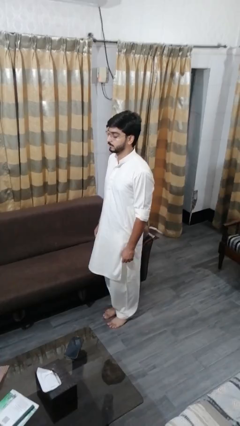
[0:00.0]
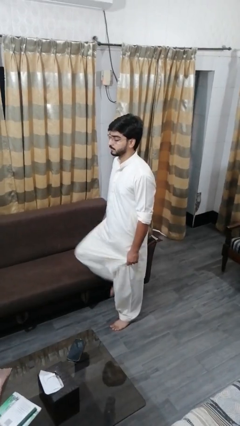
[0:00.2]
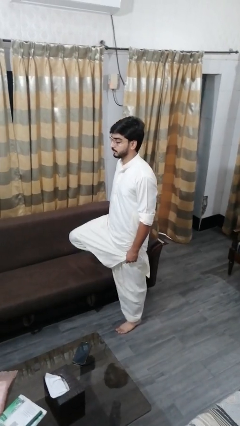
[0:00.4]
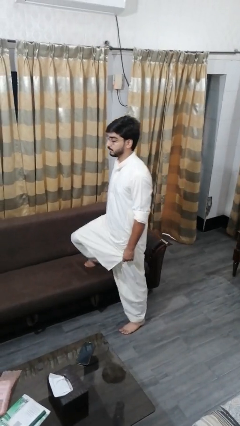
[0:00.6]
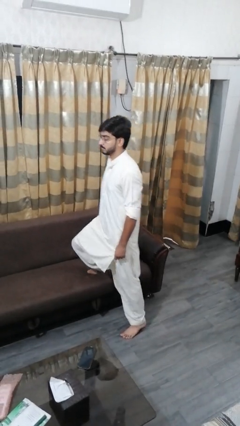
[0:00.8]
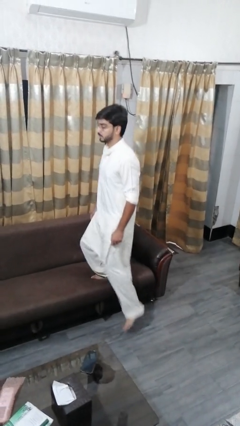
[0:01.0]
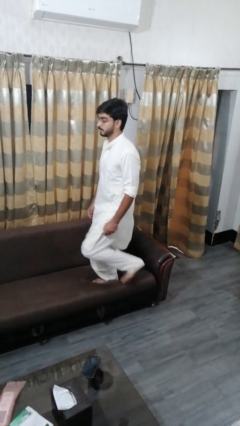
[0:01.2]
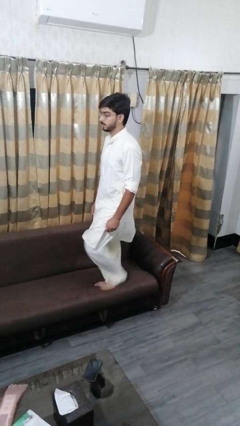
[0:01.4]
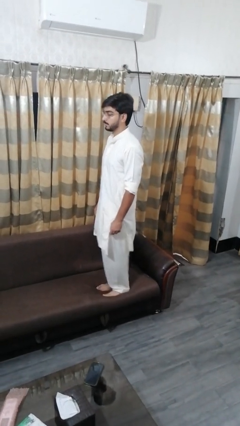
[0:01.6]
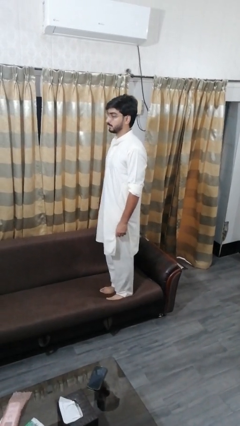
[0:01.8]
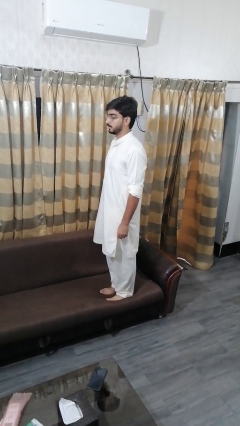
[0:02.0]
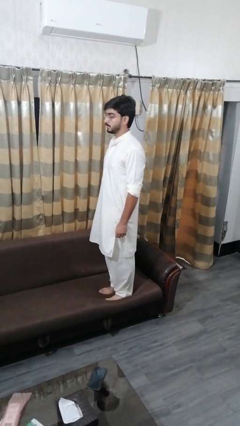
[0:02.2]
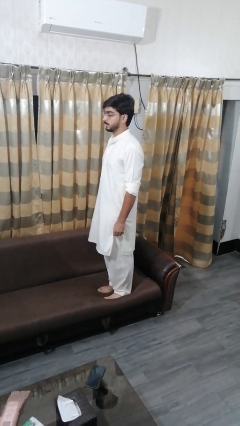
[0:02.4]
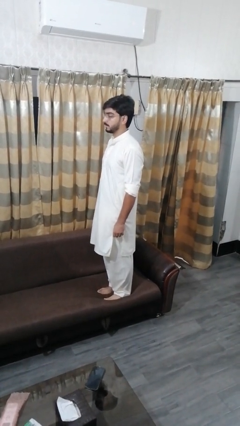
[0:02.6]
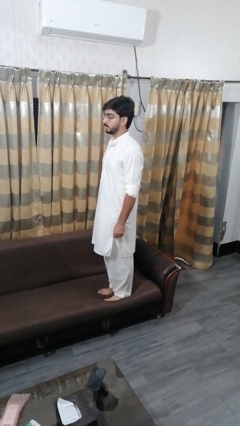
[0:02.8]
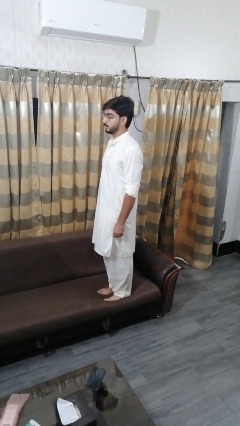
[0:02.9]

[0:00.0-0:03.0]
person climbs on couch

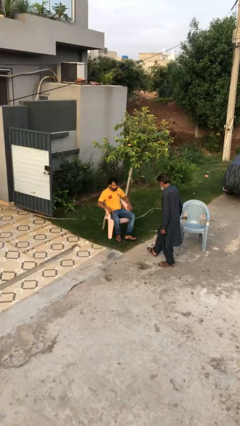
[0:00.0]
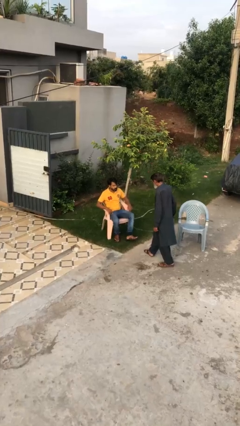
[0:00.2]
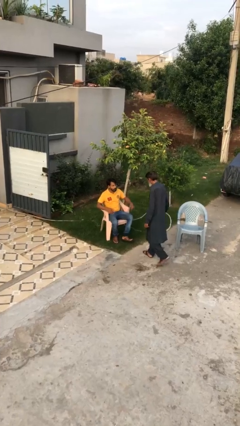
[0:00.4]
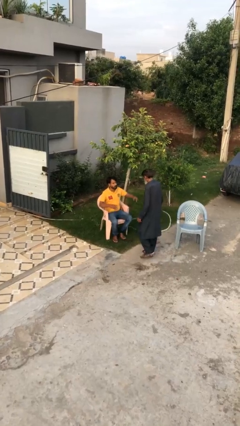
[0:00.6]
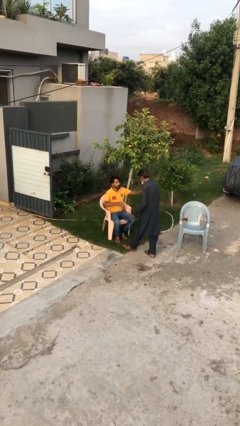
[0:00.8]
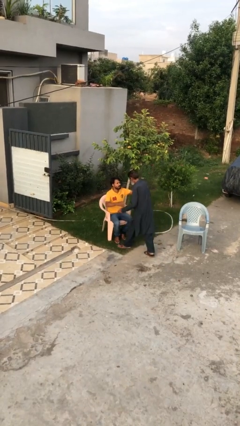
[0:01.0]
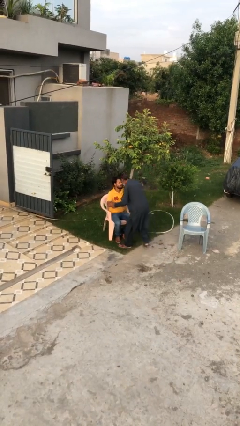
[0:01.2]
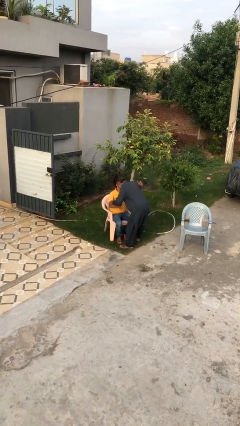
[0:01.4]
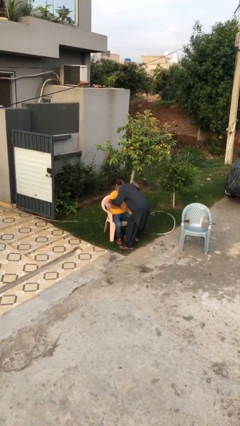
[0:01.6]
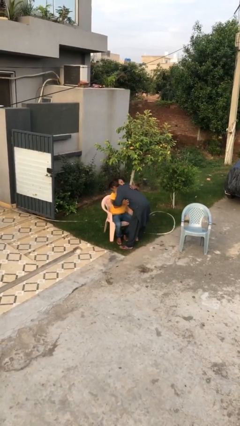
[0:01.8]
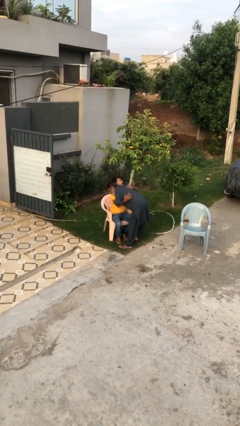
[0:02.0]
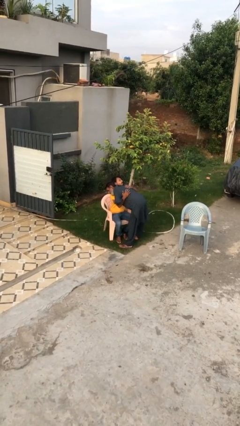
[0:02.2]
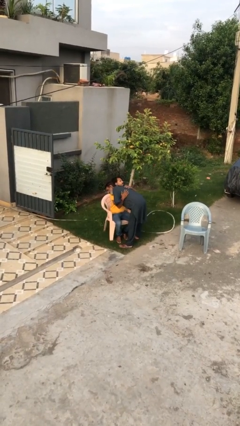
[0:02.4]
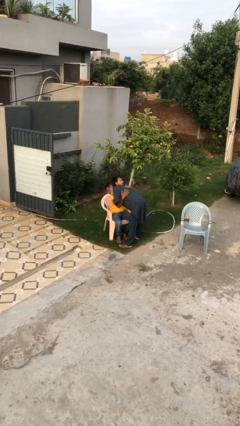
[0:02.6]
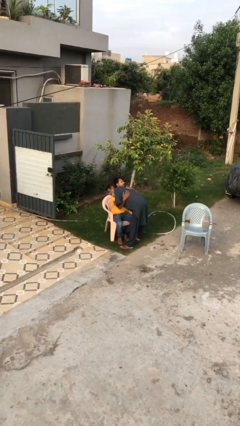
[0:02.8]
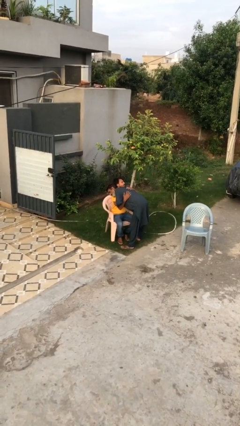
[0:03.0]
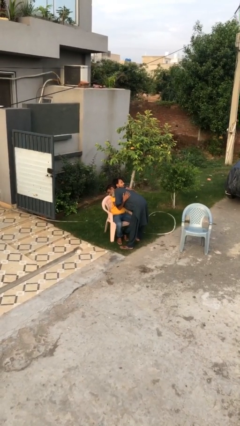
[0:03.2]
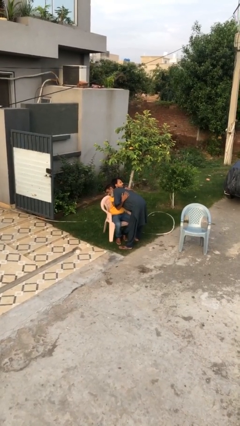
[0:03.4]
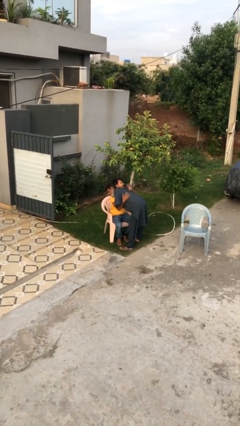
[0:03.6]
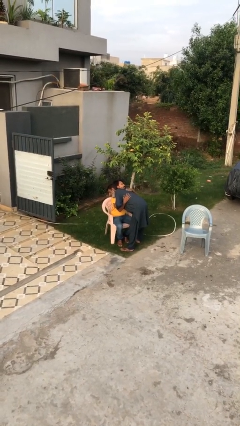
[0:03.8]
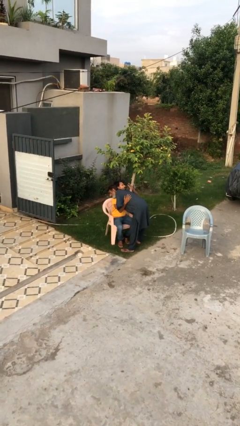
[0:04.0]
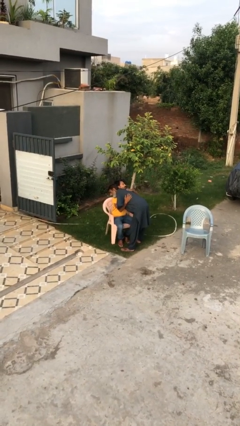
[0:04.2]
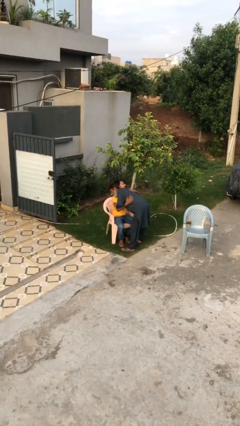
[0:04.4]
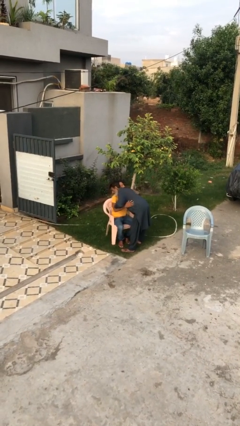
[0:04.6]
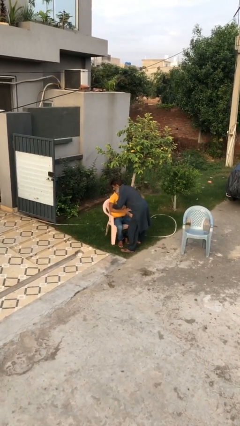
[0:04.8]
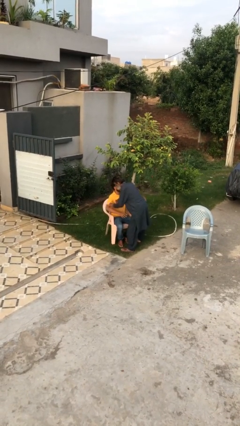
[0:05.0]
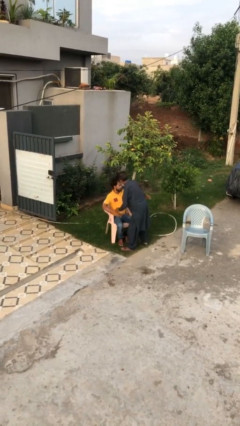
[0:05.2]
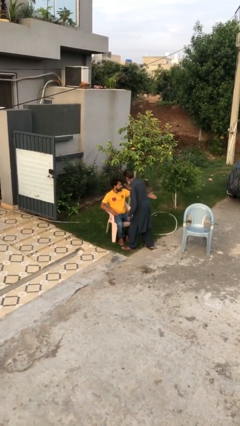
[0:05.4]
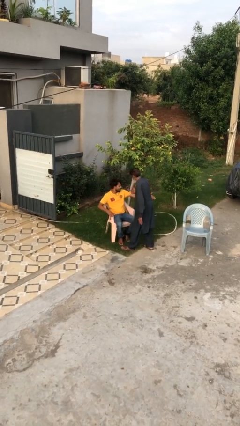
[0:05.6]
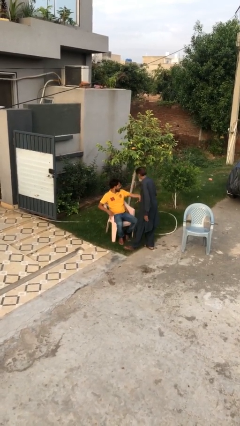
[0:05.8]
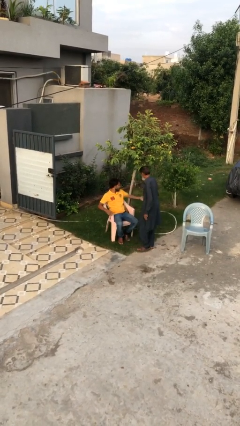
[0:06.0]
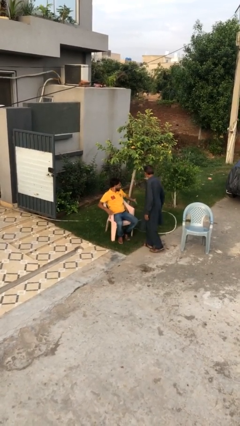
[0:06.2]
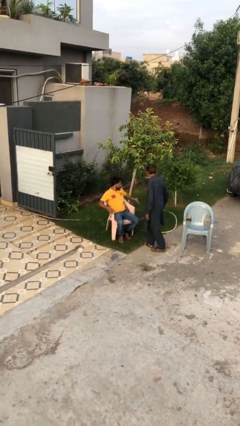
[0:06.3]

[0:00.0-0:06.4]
person embraces person

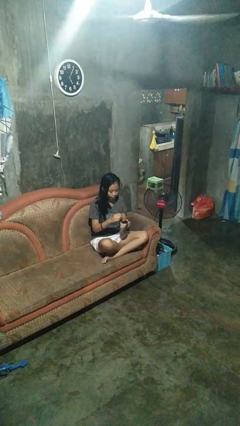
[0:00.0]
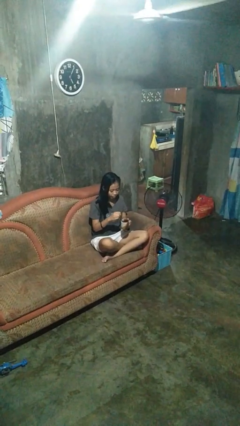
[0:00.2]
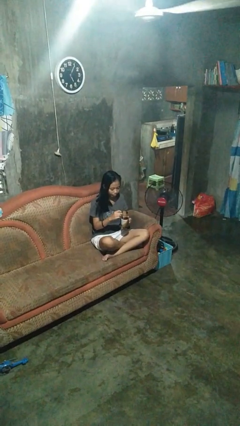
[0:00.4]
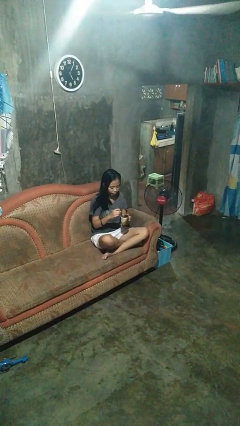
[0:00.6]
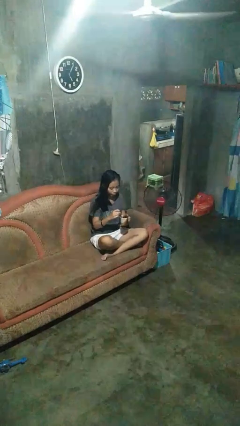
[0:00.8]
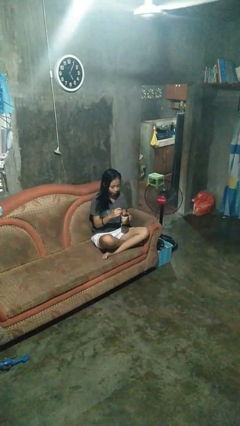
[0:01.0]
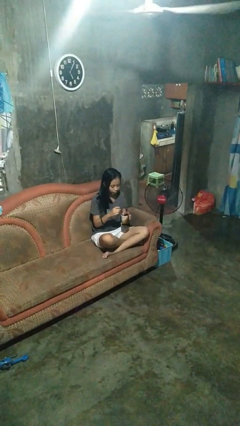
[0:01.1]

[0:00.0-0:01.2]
person stirs mug

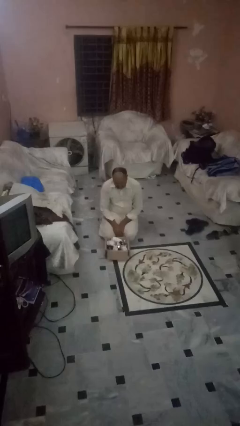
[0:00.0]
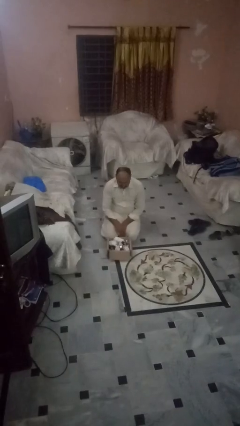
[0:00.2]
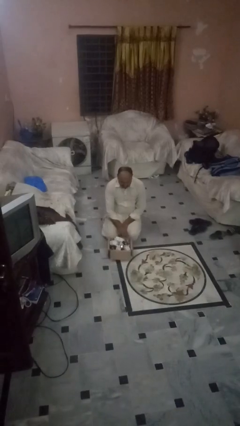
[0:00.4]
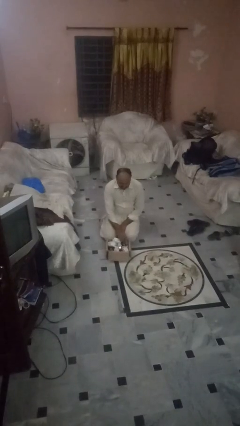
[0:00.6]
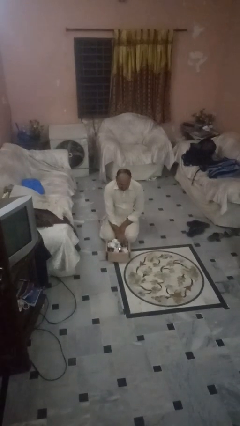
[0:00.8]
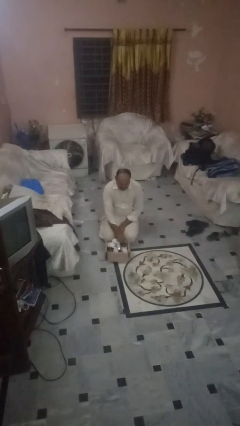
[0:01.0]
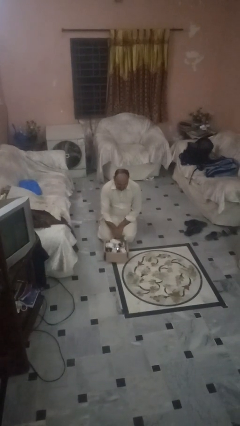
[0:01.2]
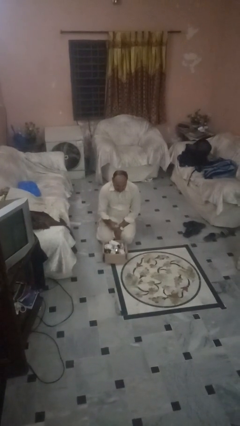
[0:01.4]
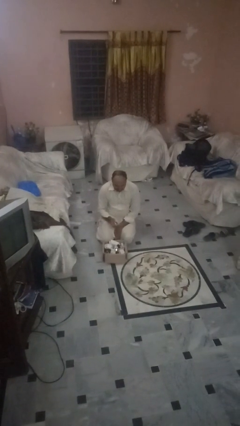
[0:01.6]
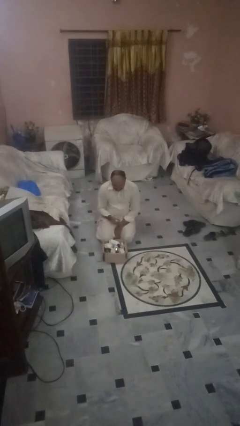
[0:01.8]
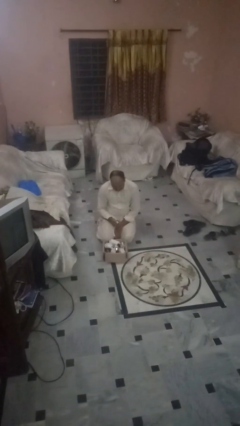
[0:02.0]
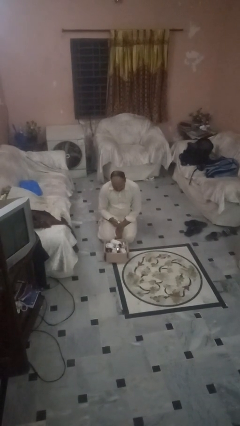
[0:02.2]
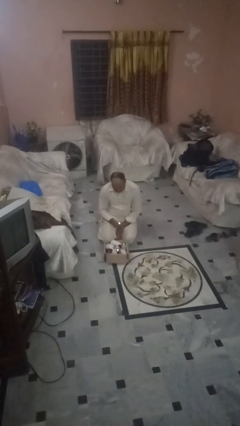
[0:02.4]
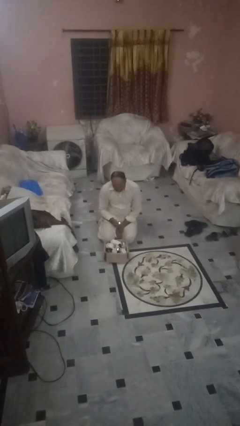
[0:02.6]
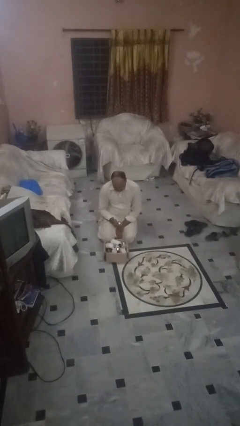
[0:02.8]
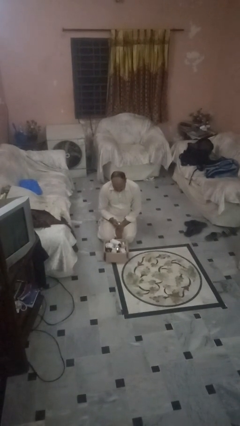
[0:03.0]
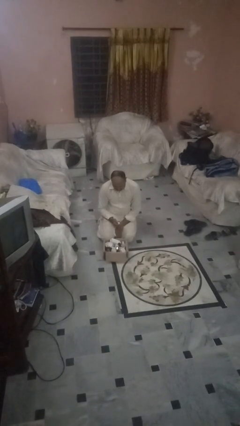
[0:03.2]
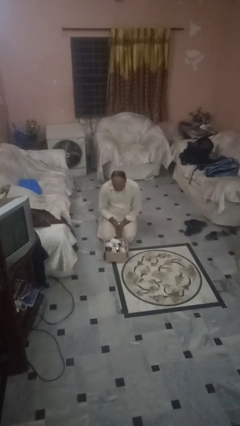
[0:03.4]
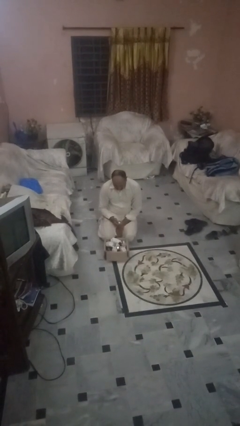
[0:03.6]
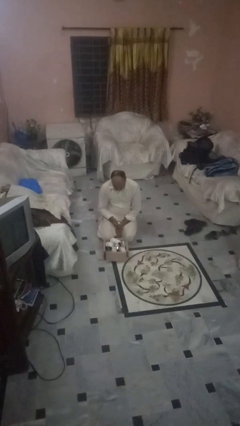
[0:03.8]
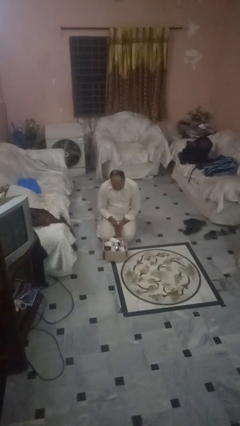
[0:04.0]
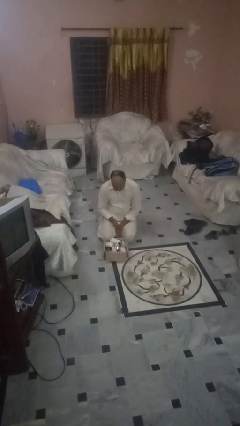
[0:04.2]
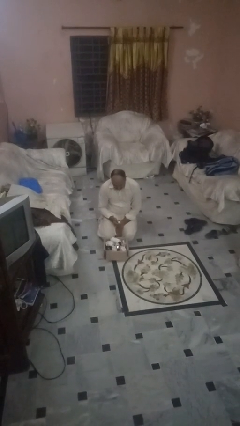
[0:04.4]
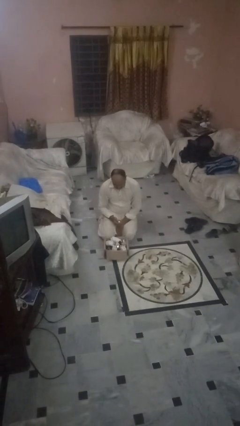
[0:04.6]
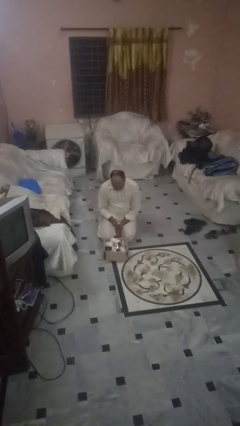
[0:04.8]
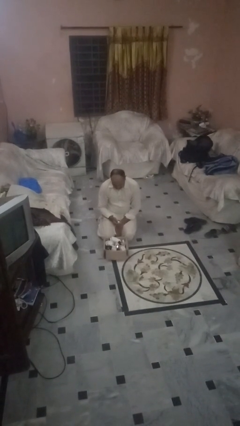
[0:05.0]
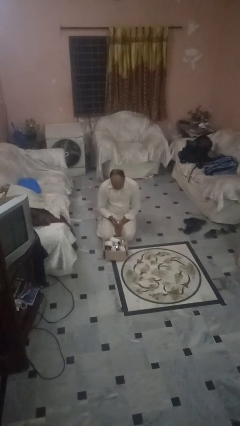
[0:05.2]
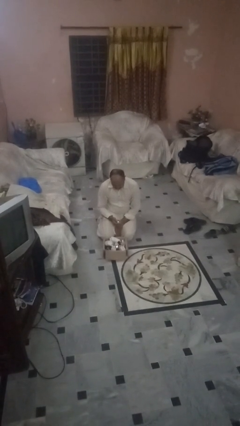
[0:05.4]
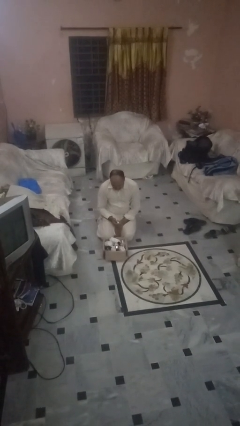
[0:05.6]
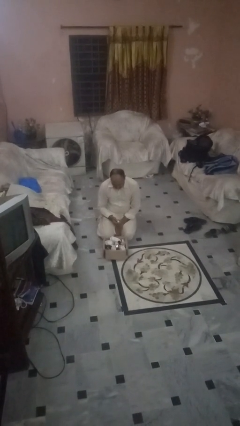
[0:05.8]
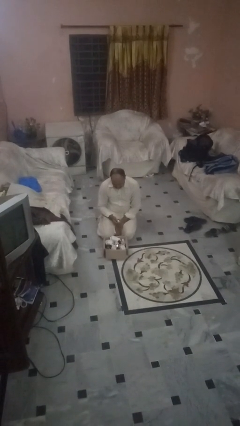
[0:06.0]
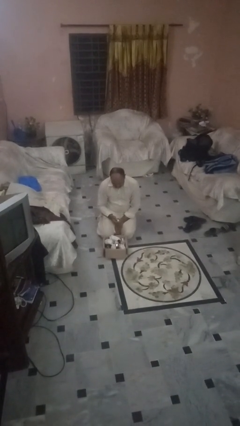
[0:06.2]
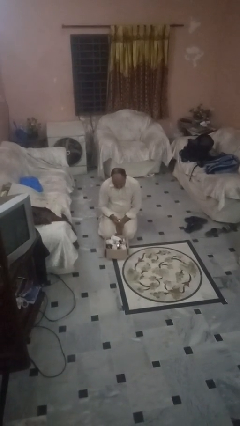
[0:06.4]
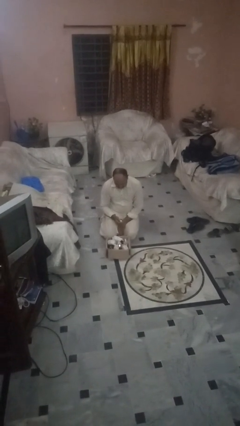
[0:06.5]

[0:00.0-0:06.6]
person takes object from box

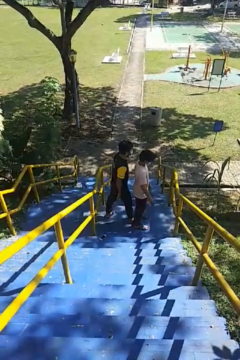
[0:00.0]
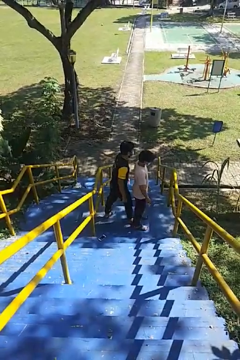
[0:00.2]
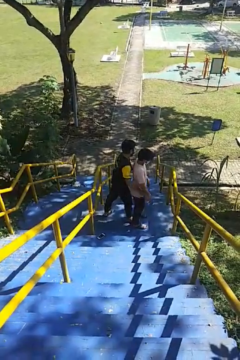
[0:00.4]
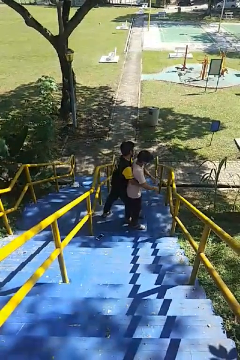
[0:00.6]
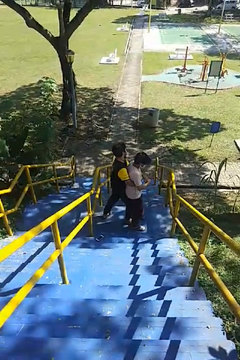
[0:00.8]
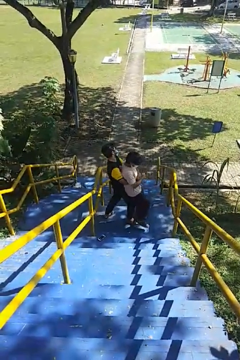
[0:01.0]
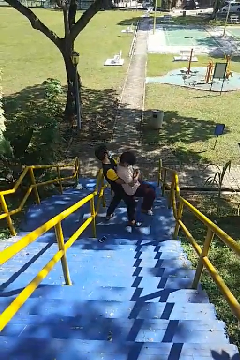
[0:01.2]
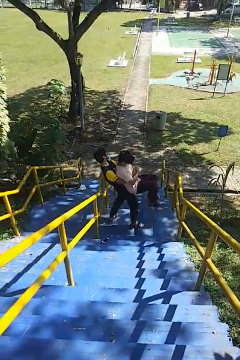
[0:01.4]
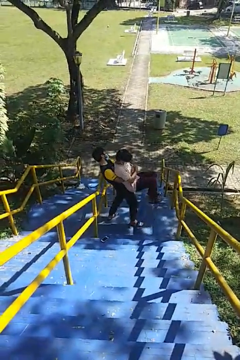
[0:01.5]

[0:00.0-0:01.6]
person picks up person
